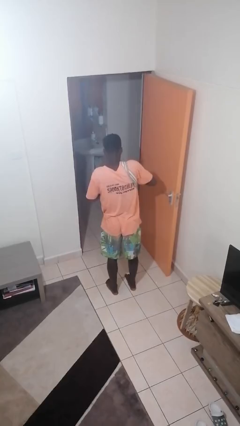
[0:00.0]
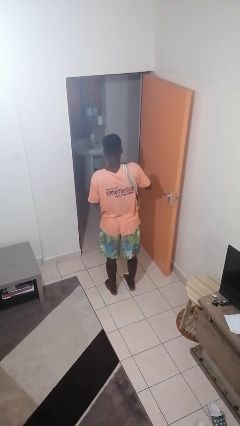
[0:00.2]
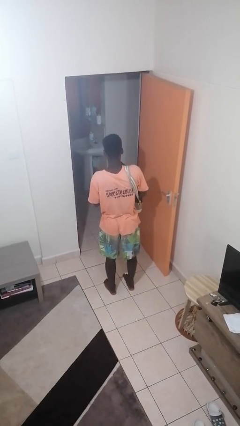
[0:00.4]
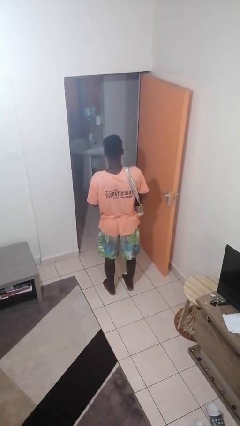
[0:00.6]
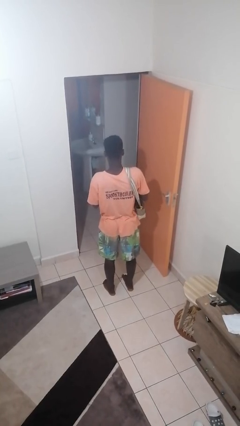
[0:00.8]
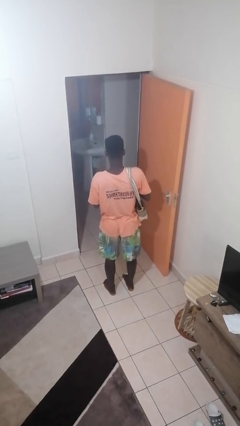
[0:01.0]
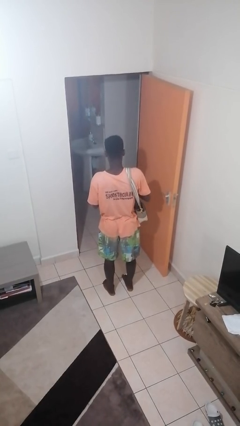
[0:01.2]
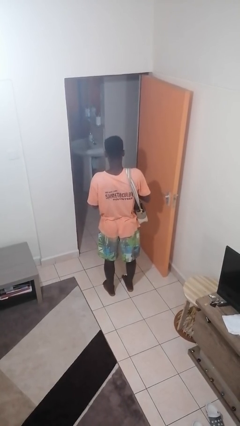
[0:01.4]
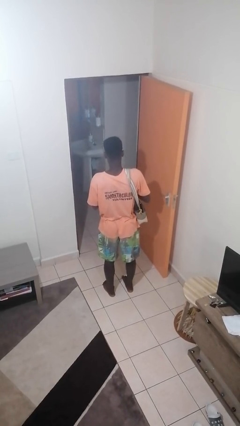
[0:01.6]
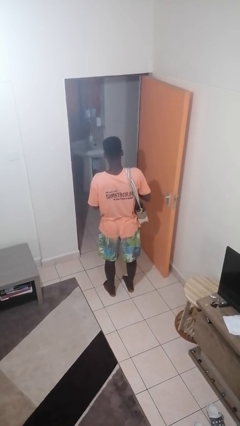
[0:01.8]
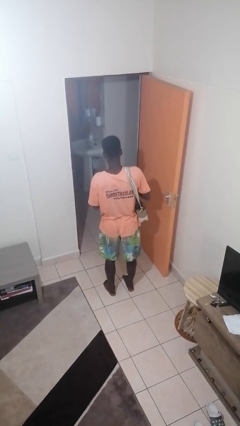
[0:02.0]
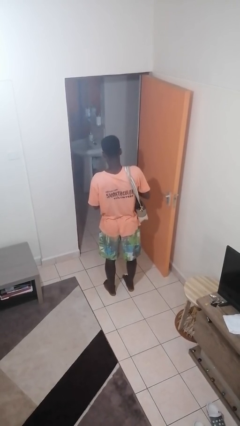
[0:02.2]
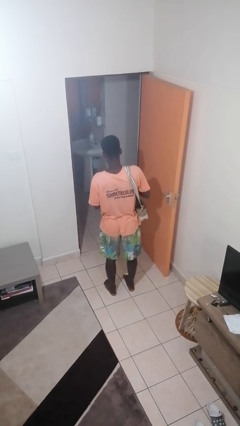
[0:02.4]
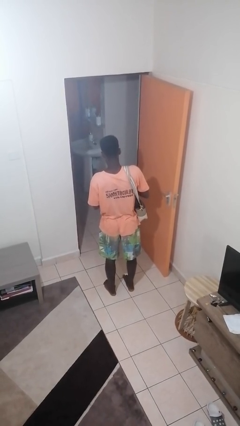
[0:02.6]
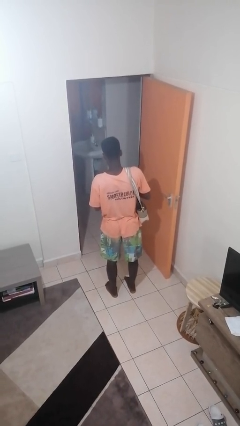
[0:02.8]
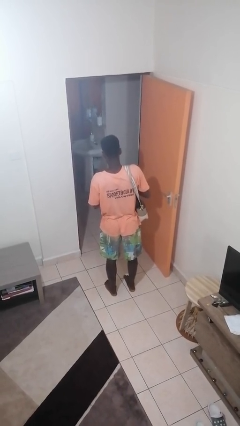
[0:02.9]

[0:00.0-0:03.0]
person takes object from purse

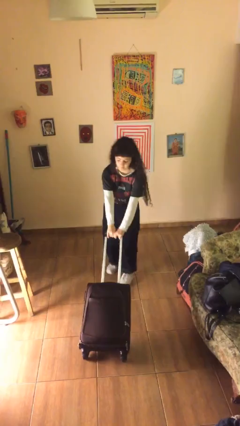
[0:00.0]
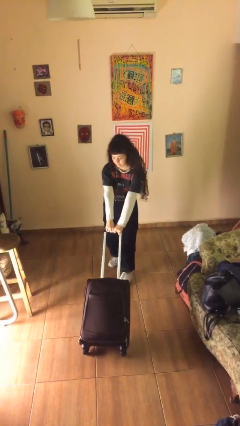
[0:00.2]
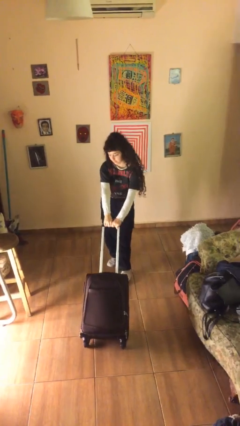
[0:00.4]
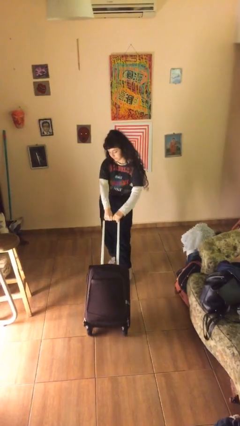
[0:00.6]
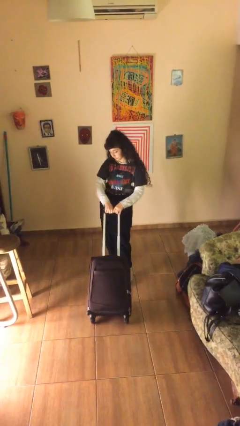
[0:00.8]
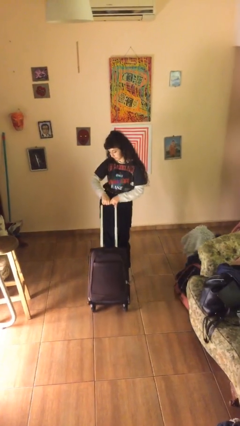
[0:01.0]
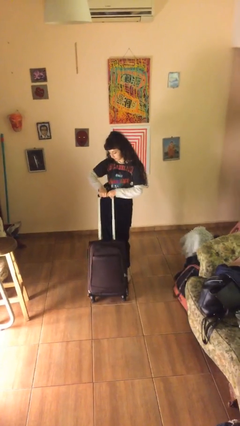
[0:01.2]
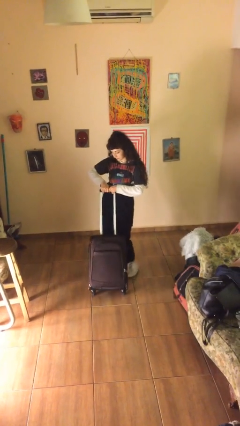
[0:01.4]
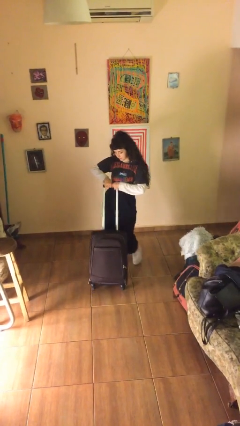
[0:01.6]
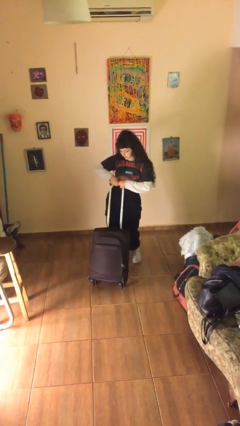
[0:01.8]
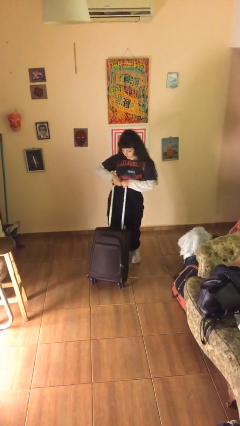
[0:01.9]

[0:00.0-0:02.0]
person pulls wheeled cart

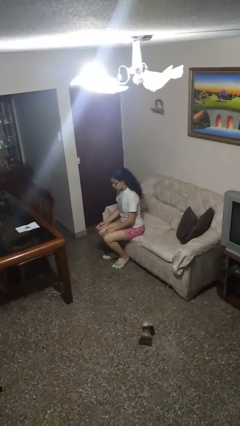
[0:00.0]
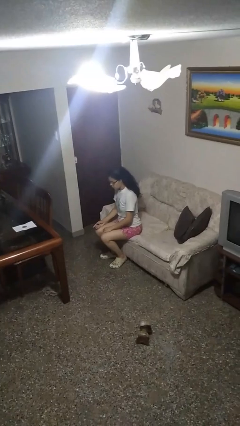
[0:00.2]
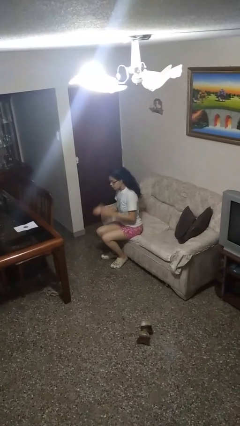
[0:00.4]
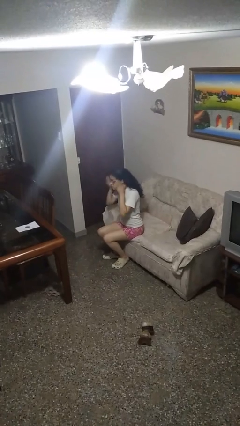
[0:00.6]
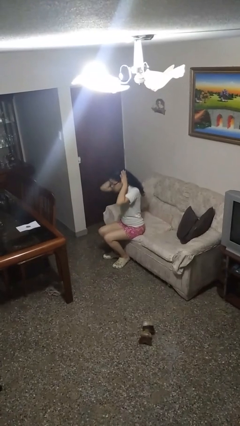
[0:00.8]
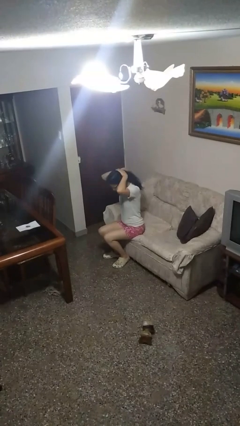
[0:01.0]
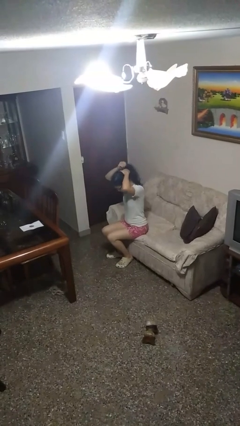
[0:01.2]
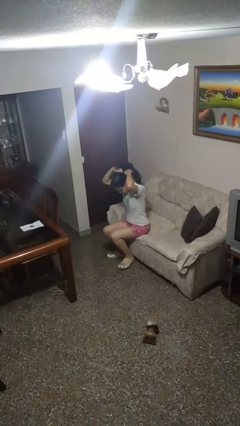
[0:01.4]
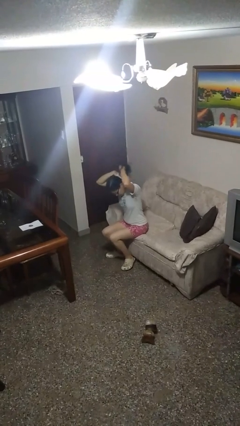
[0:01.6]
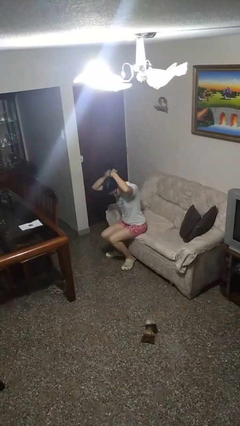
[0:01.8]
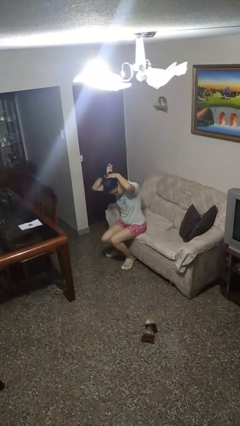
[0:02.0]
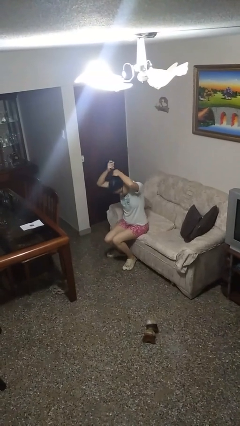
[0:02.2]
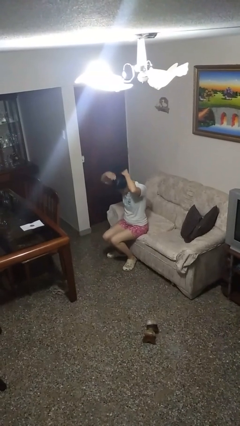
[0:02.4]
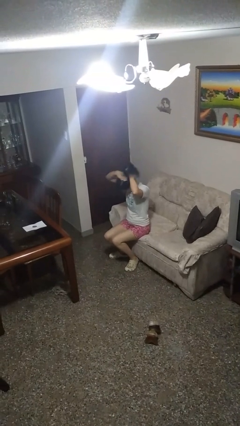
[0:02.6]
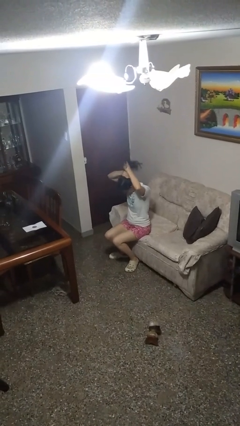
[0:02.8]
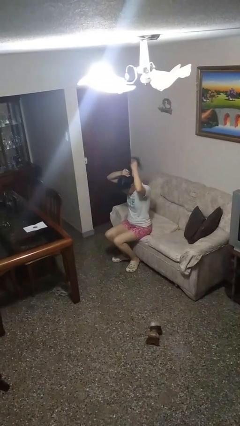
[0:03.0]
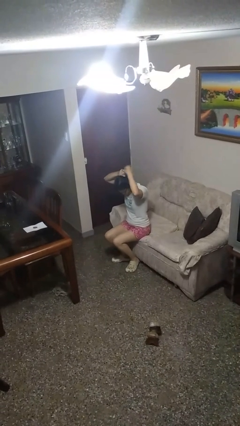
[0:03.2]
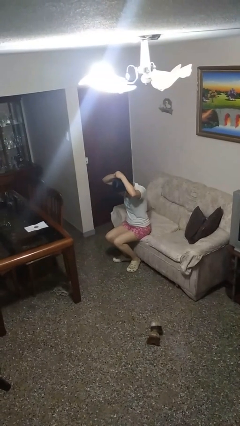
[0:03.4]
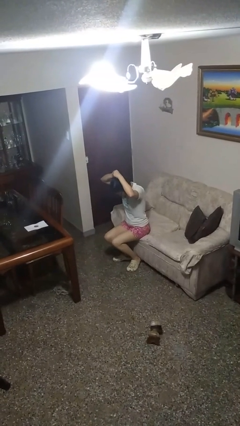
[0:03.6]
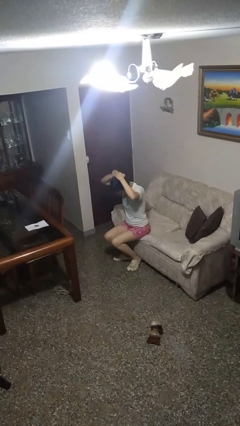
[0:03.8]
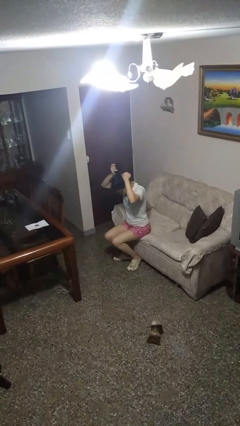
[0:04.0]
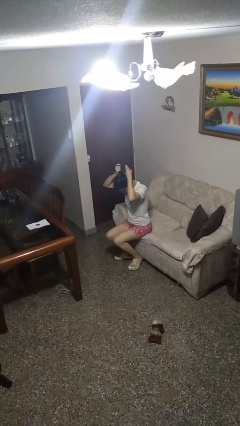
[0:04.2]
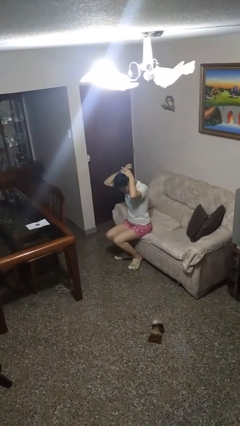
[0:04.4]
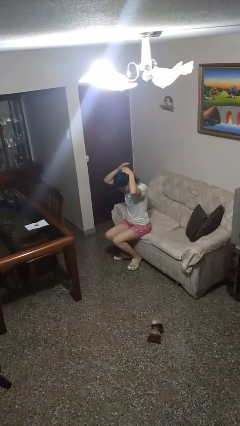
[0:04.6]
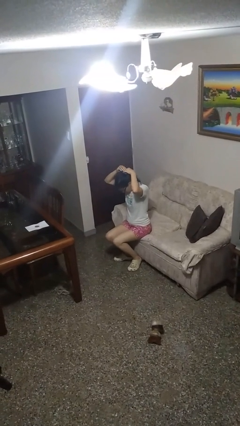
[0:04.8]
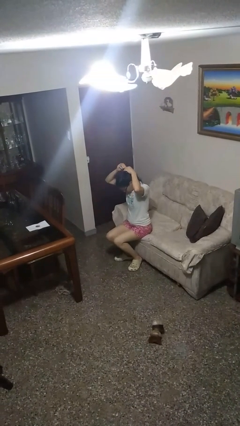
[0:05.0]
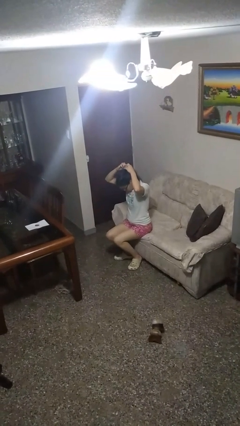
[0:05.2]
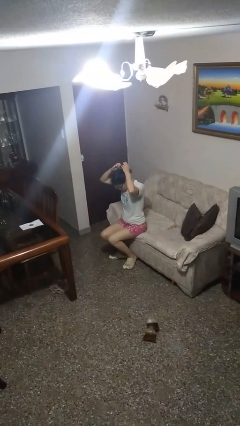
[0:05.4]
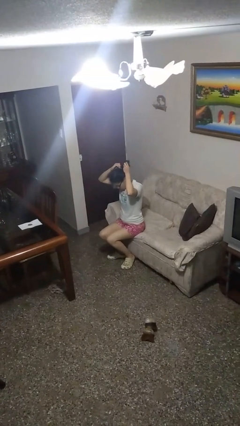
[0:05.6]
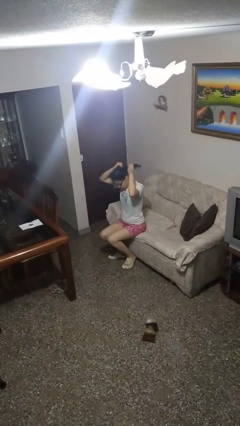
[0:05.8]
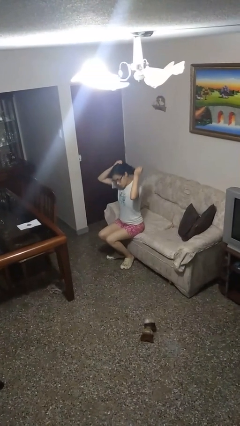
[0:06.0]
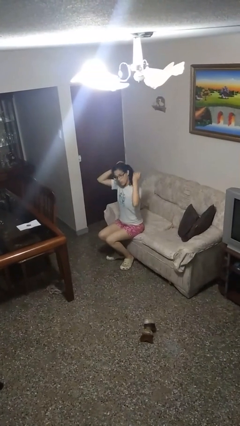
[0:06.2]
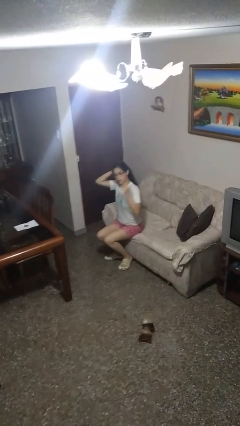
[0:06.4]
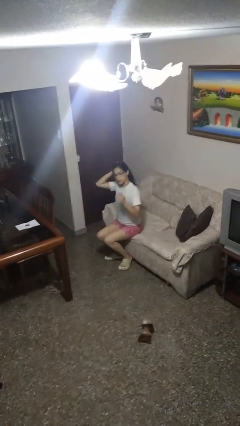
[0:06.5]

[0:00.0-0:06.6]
person puts hair in ponytail

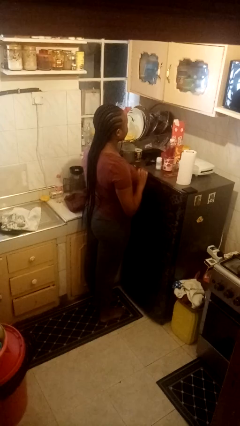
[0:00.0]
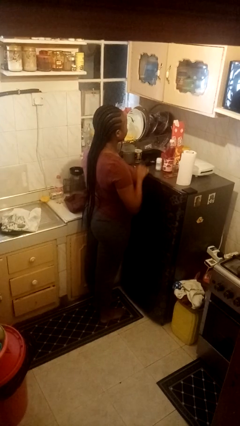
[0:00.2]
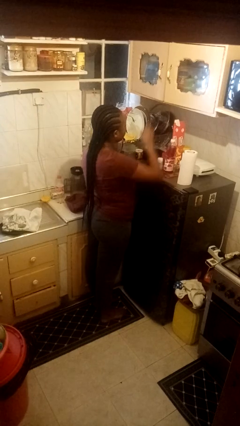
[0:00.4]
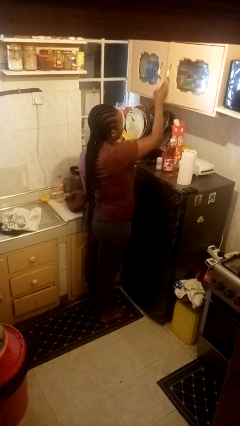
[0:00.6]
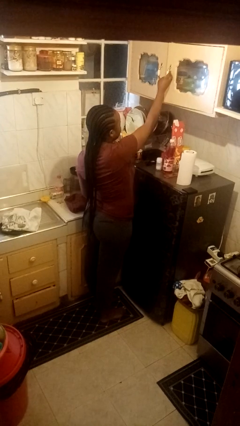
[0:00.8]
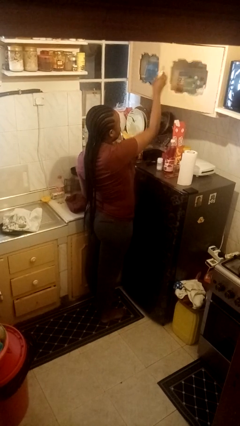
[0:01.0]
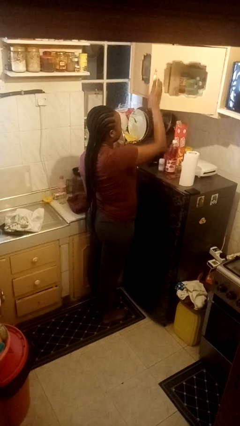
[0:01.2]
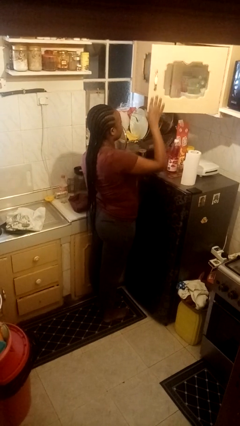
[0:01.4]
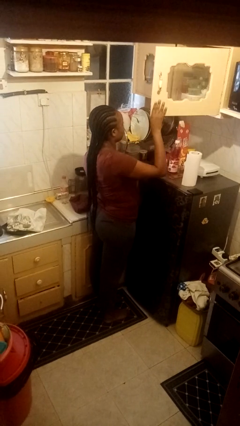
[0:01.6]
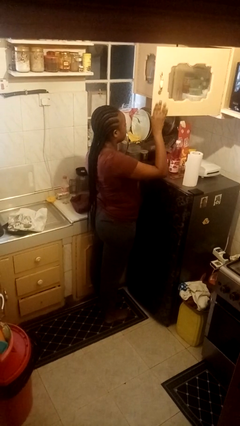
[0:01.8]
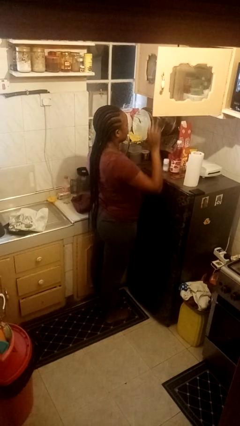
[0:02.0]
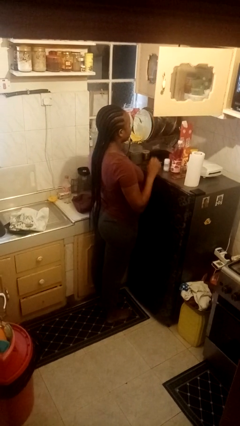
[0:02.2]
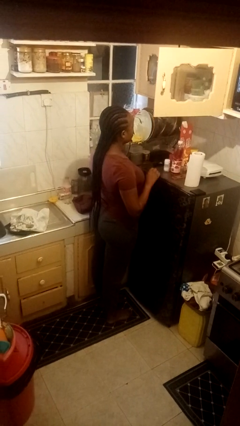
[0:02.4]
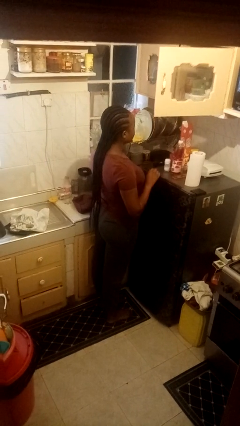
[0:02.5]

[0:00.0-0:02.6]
person opens cabinet

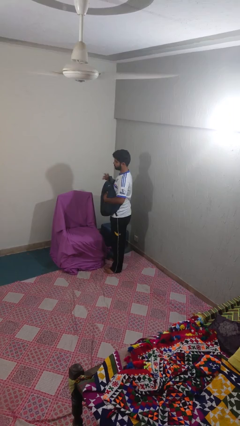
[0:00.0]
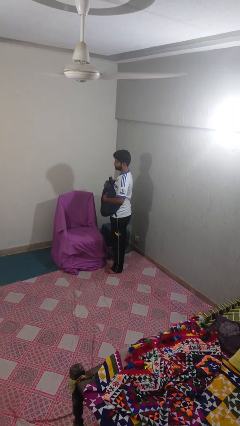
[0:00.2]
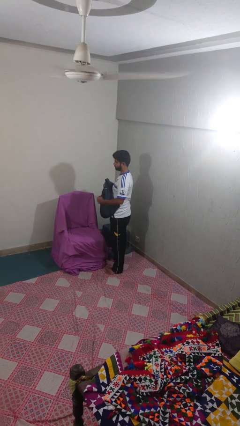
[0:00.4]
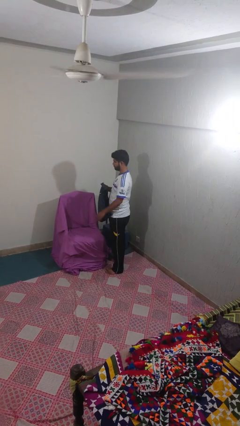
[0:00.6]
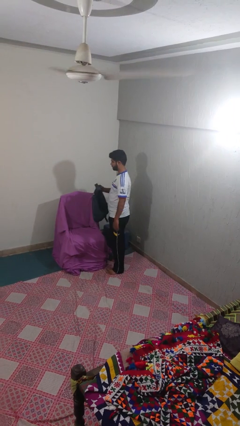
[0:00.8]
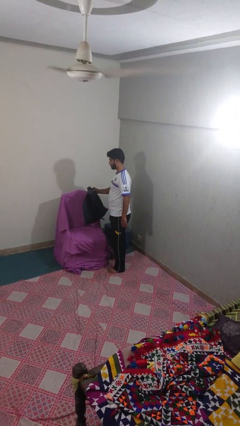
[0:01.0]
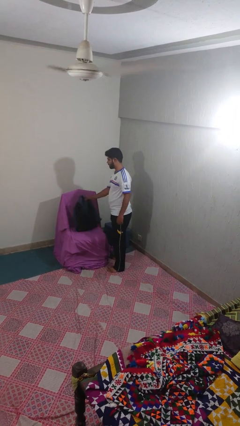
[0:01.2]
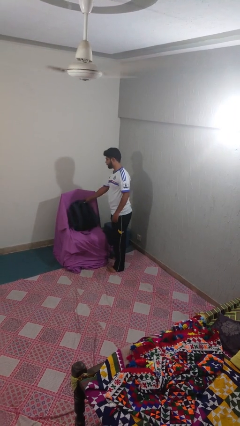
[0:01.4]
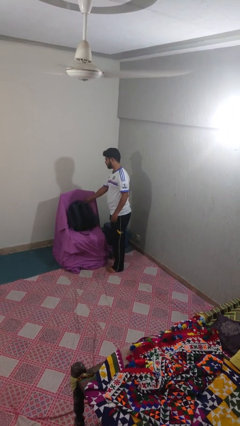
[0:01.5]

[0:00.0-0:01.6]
person puts down object on couch

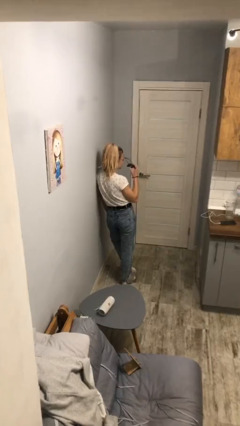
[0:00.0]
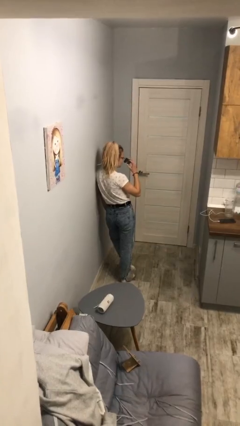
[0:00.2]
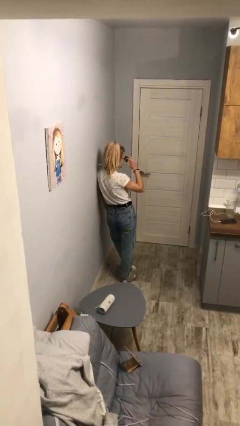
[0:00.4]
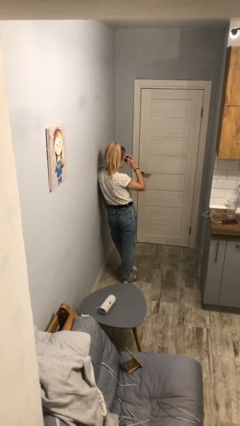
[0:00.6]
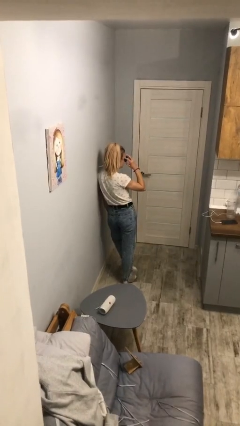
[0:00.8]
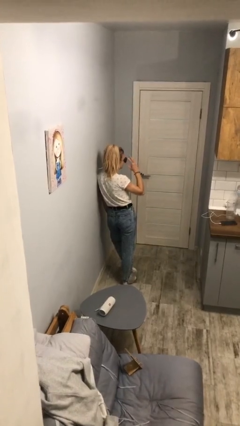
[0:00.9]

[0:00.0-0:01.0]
person puts on glasses

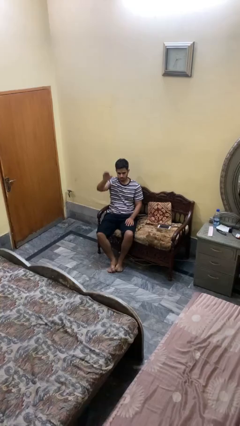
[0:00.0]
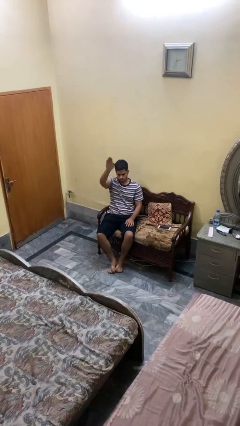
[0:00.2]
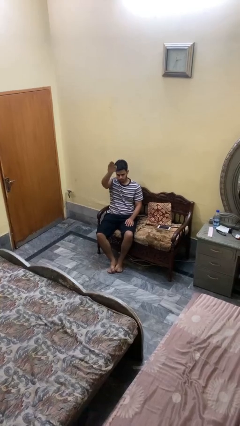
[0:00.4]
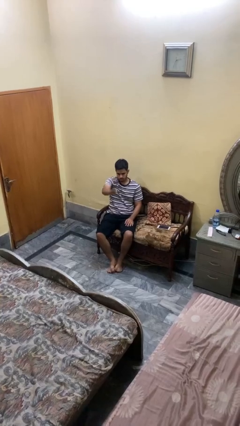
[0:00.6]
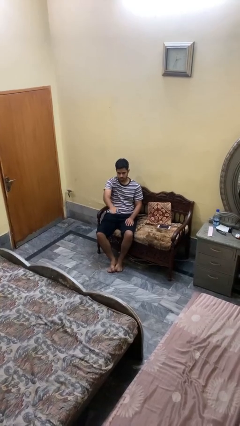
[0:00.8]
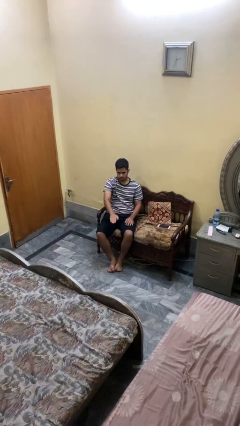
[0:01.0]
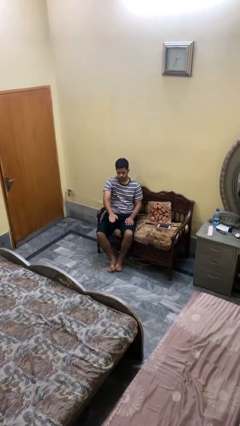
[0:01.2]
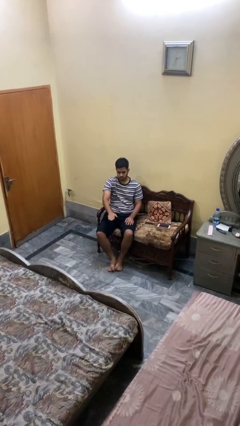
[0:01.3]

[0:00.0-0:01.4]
person gestures swipe down
